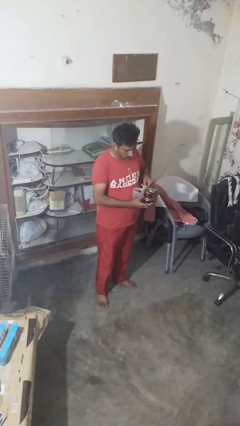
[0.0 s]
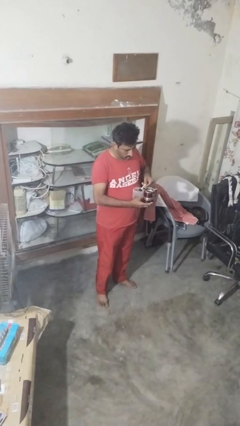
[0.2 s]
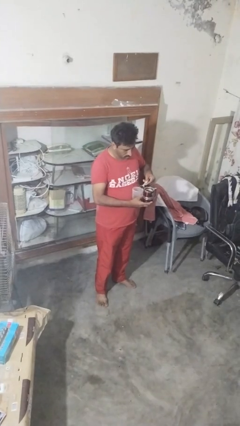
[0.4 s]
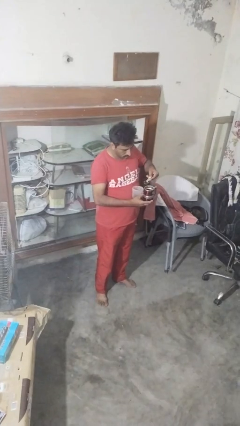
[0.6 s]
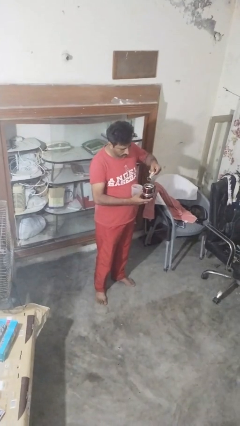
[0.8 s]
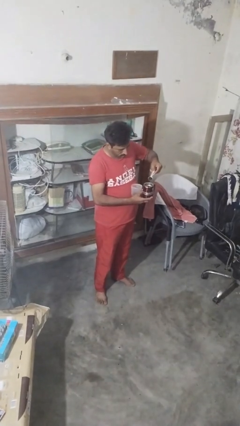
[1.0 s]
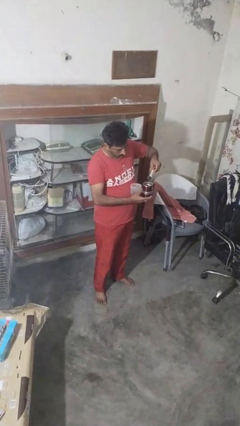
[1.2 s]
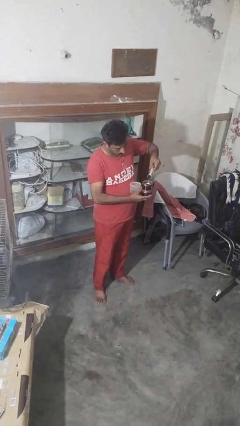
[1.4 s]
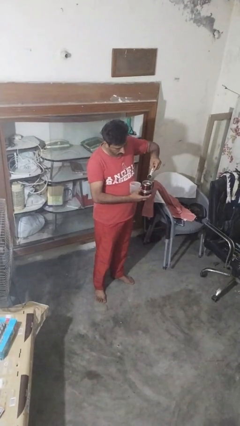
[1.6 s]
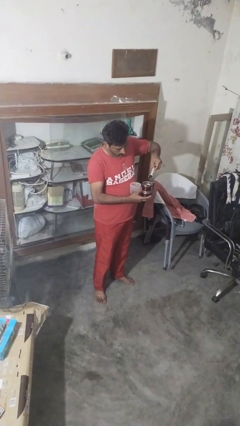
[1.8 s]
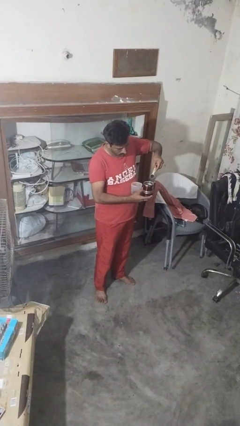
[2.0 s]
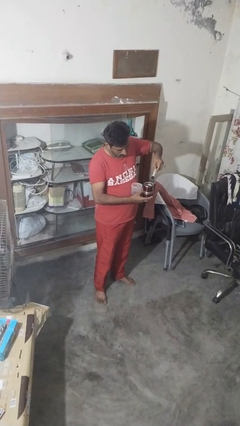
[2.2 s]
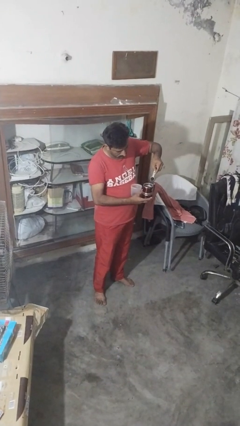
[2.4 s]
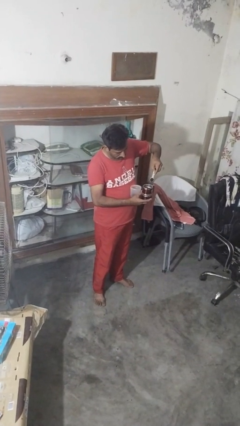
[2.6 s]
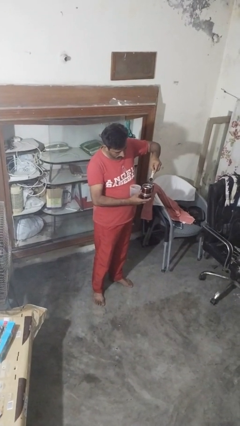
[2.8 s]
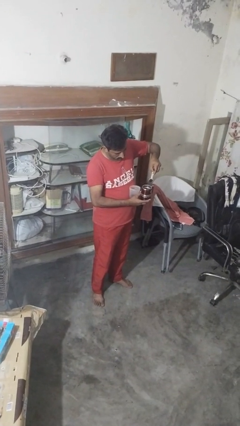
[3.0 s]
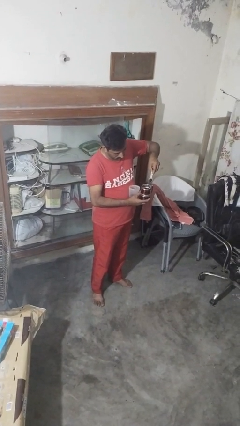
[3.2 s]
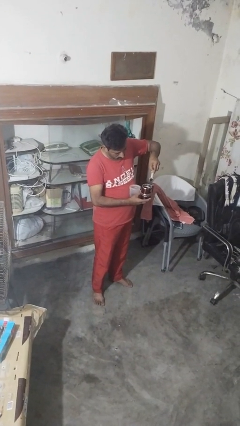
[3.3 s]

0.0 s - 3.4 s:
person pours coffee into mug

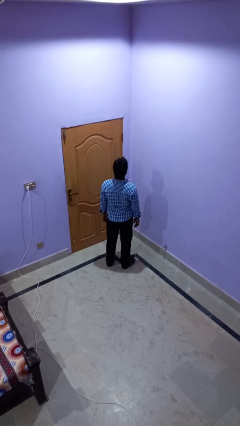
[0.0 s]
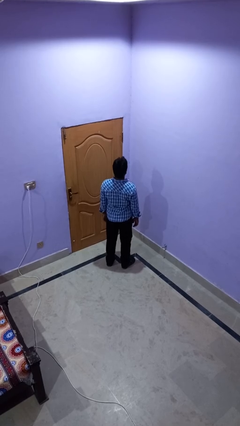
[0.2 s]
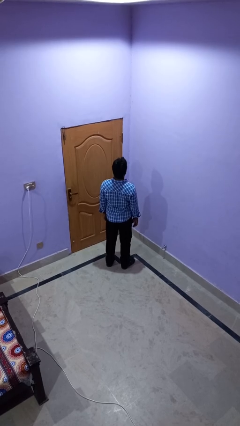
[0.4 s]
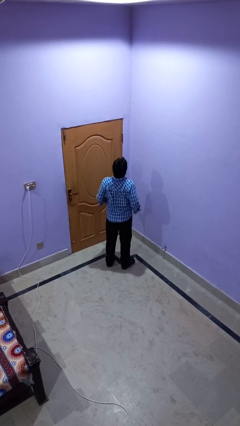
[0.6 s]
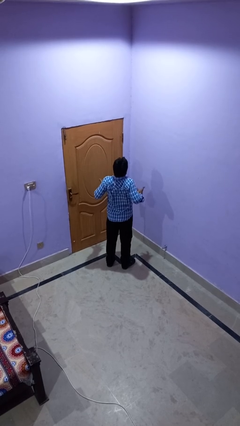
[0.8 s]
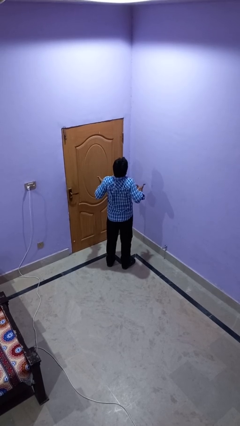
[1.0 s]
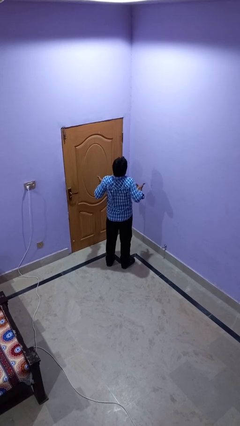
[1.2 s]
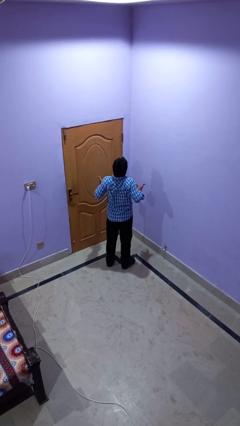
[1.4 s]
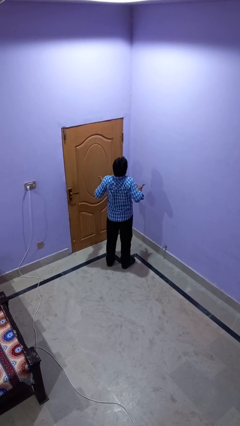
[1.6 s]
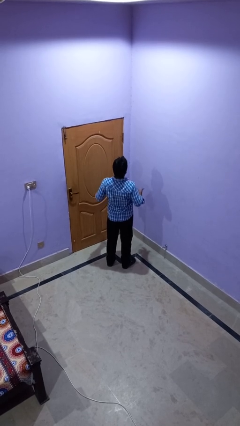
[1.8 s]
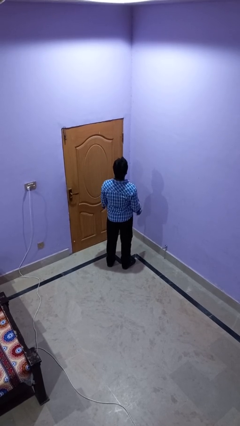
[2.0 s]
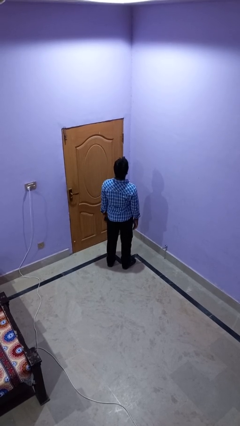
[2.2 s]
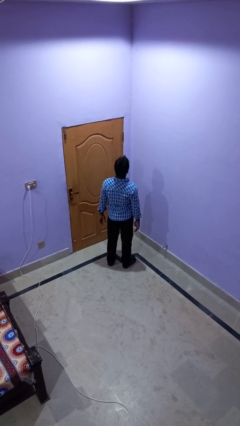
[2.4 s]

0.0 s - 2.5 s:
person shrugs

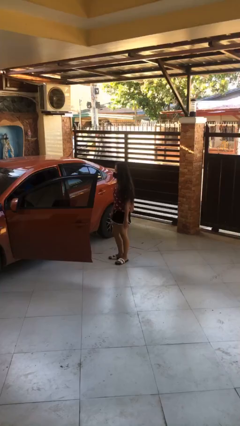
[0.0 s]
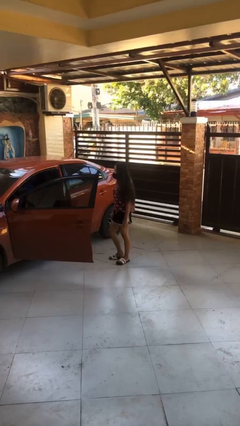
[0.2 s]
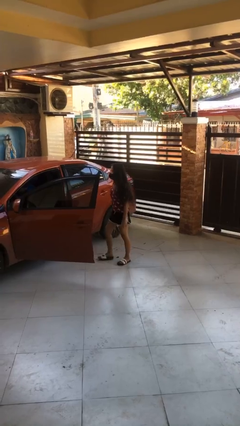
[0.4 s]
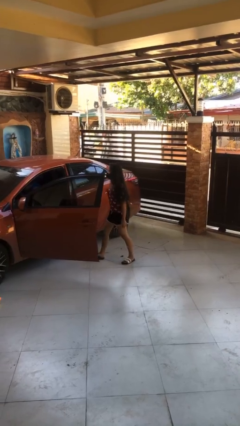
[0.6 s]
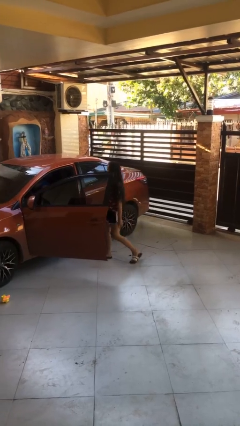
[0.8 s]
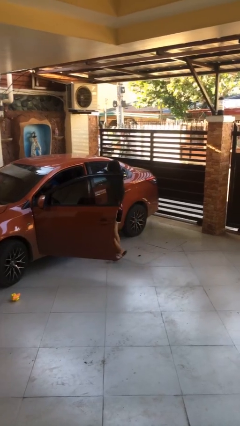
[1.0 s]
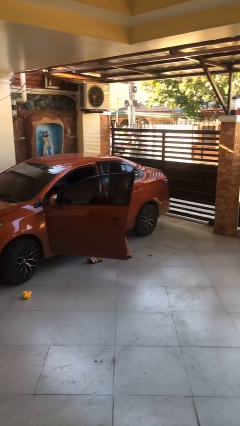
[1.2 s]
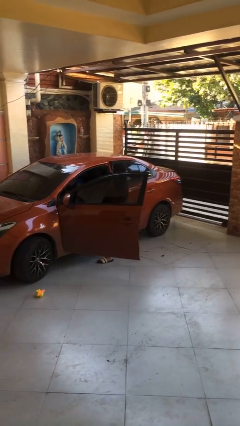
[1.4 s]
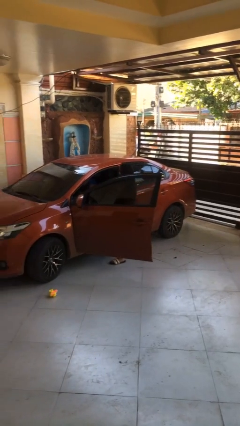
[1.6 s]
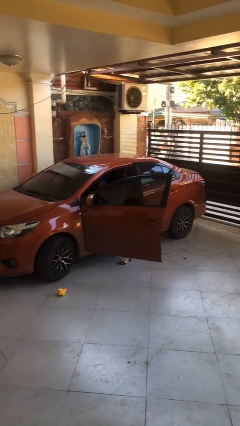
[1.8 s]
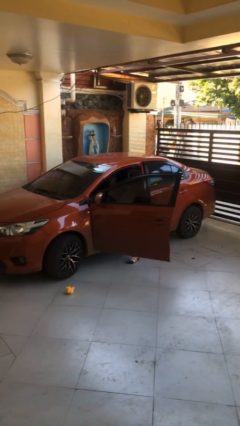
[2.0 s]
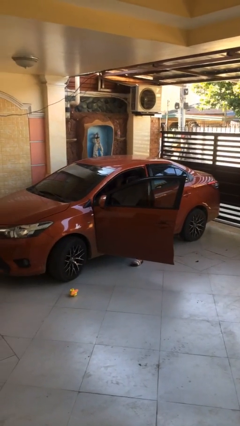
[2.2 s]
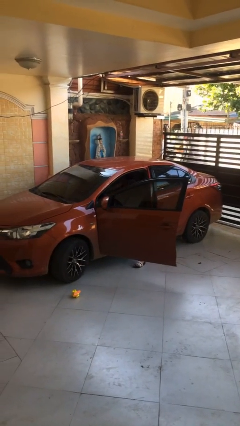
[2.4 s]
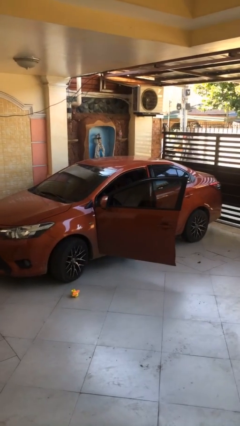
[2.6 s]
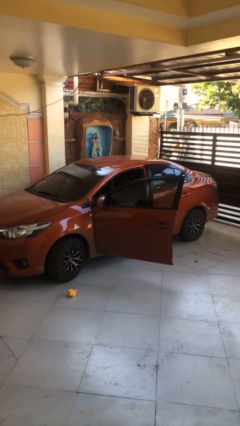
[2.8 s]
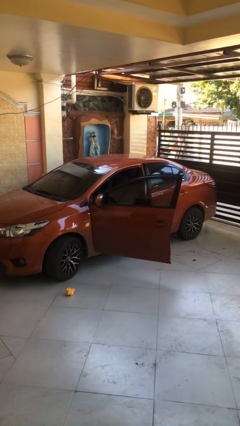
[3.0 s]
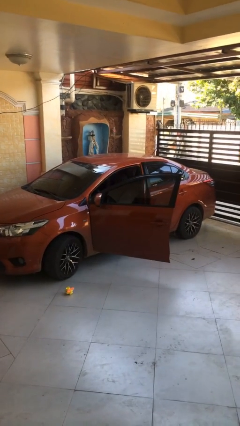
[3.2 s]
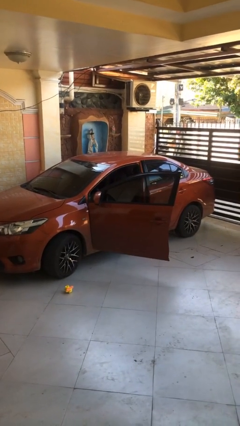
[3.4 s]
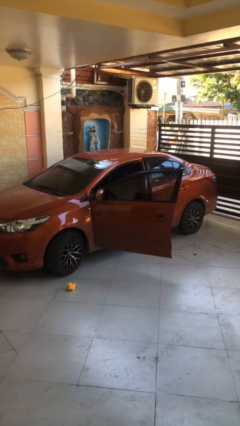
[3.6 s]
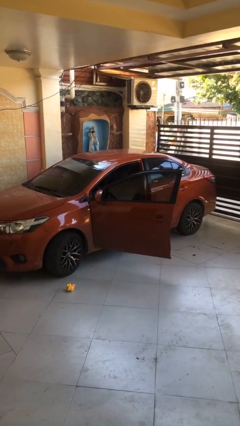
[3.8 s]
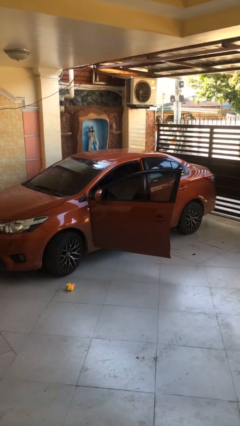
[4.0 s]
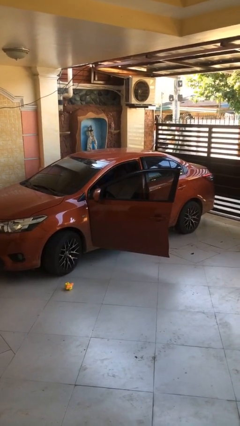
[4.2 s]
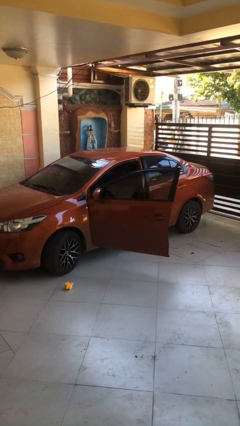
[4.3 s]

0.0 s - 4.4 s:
person enters car

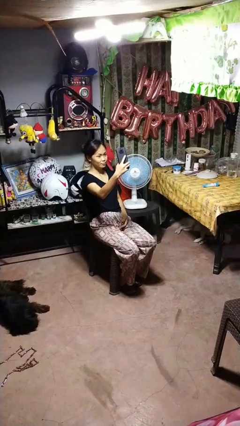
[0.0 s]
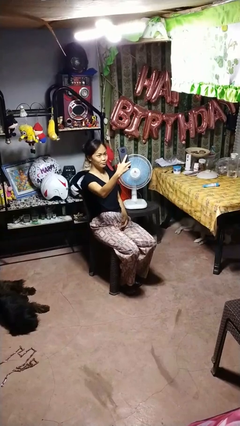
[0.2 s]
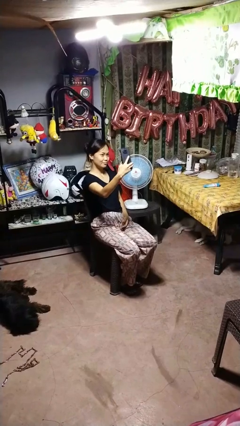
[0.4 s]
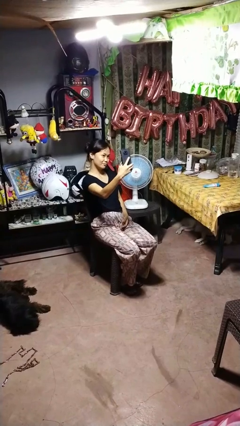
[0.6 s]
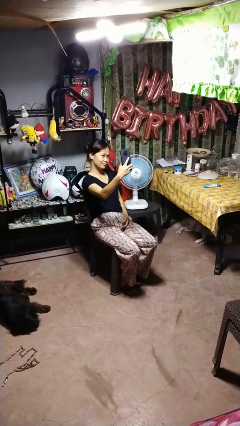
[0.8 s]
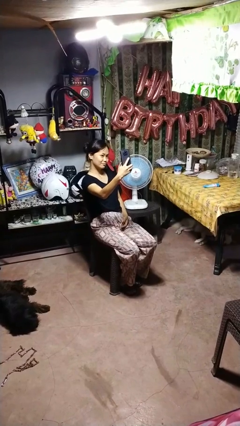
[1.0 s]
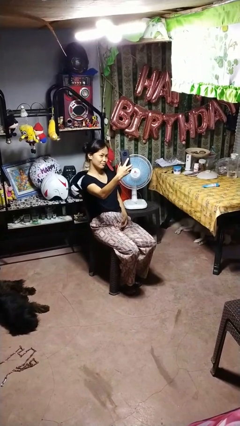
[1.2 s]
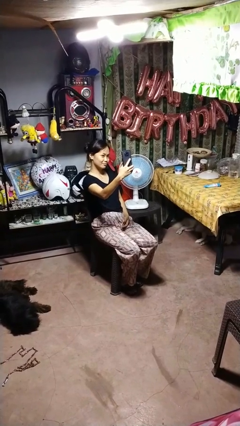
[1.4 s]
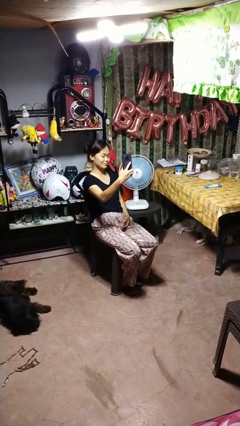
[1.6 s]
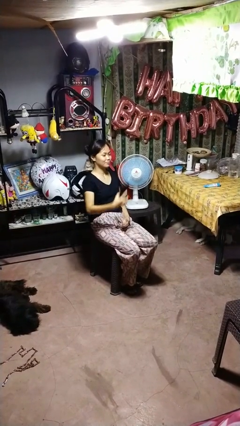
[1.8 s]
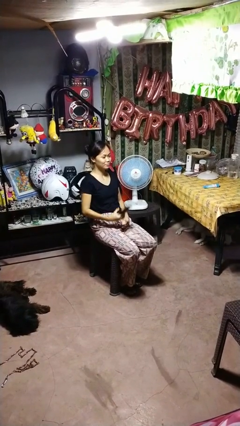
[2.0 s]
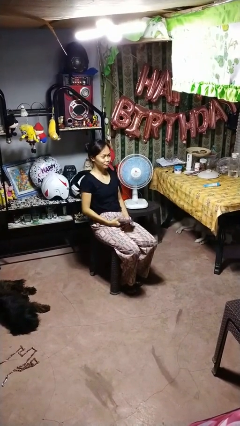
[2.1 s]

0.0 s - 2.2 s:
person takes selfie

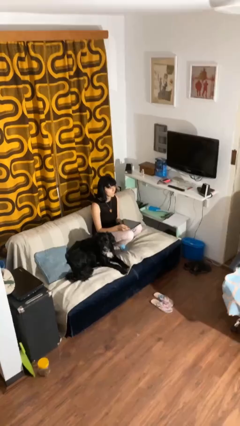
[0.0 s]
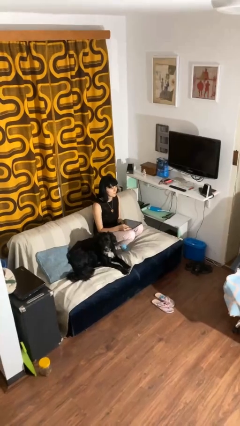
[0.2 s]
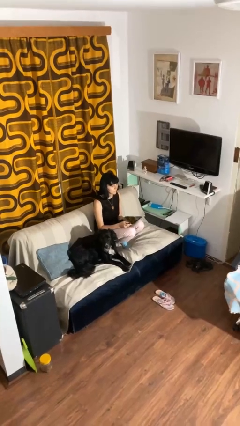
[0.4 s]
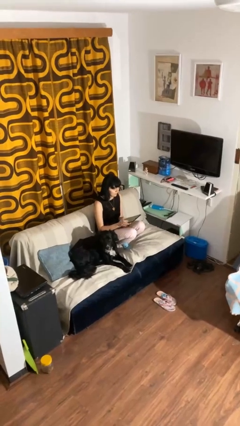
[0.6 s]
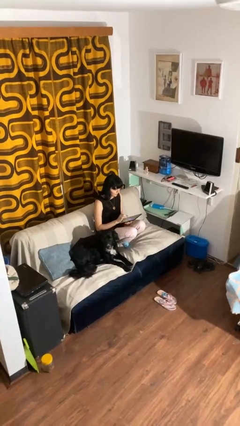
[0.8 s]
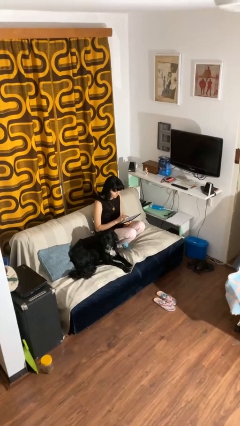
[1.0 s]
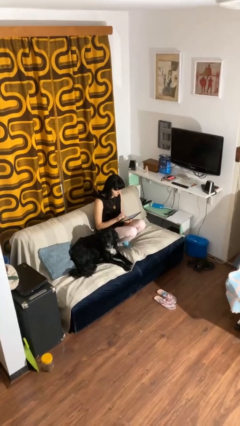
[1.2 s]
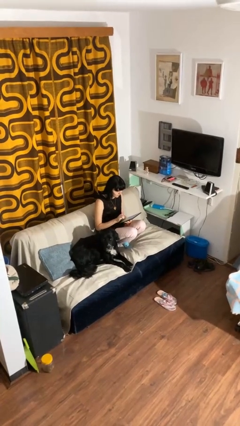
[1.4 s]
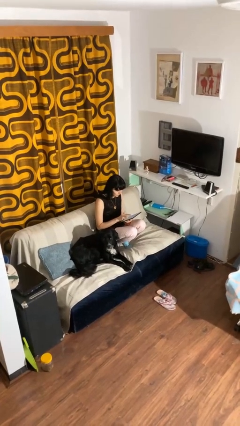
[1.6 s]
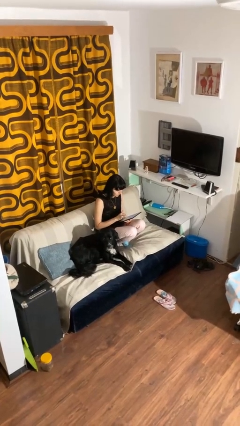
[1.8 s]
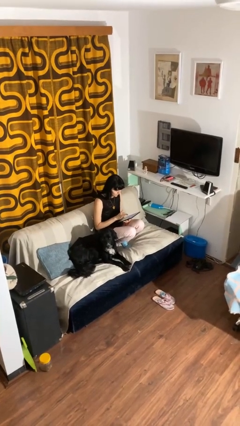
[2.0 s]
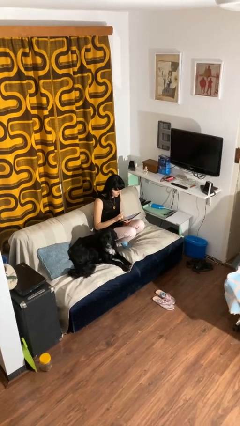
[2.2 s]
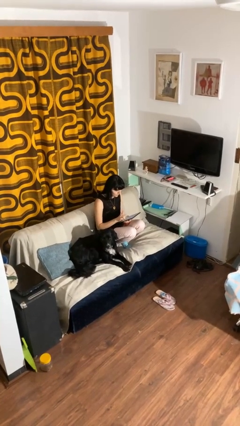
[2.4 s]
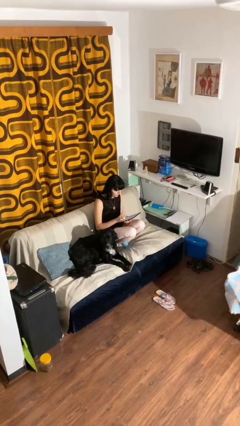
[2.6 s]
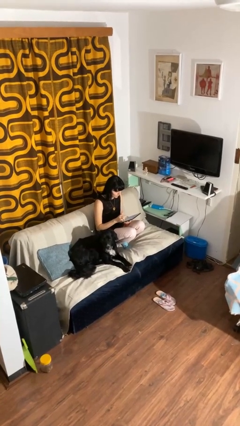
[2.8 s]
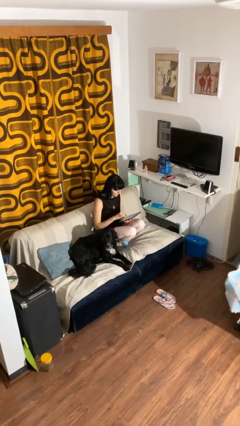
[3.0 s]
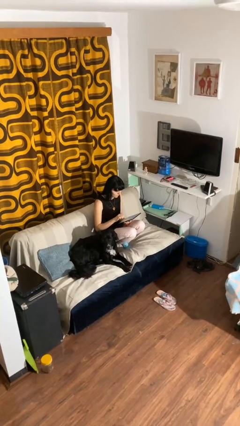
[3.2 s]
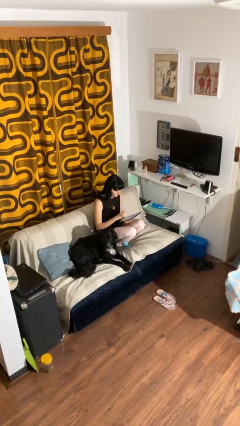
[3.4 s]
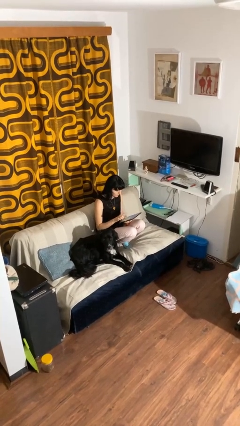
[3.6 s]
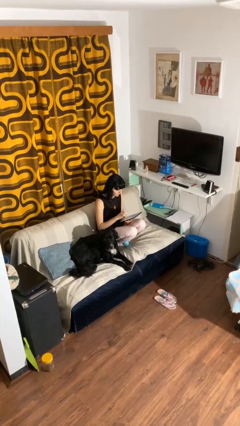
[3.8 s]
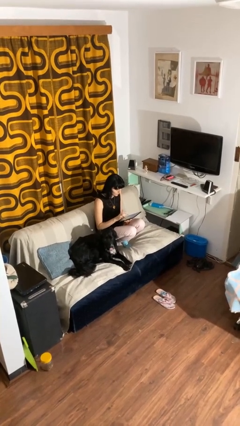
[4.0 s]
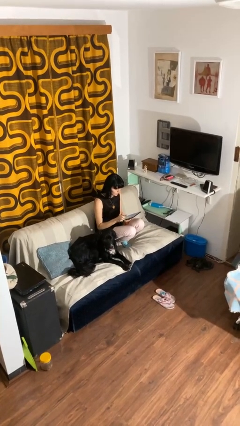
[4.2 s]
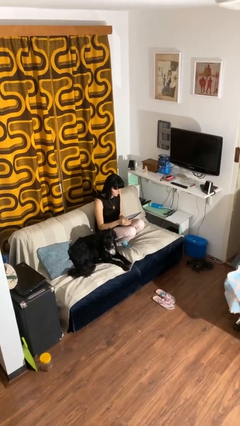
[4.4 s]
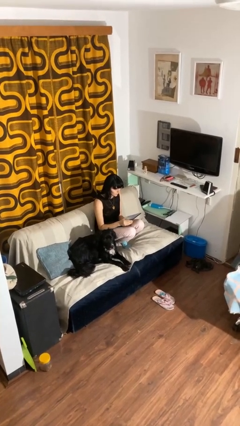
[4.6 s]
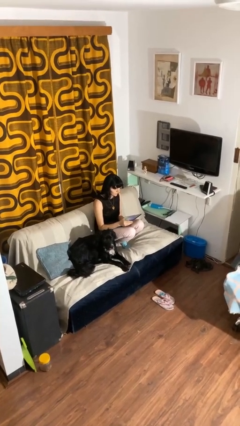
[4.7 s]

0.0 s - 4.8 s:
person interacts with tablet

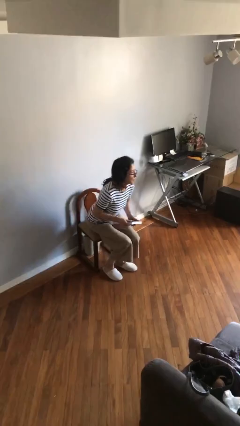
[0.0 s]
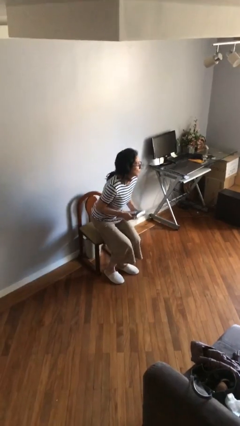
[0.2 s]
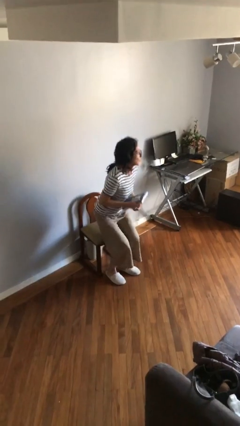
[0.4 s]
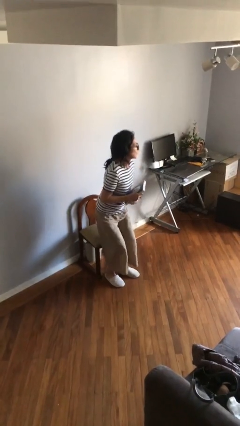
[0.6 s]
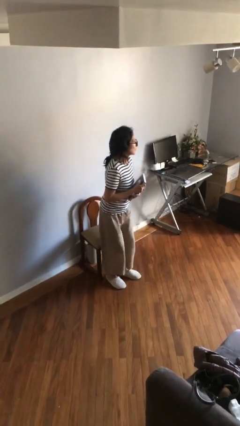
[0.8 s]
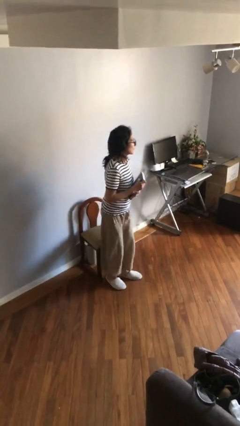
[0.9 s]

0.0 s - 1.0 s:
person stands up
